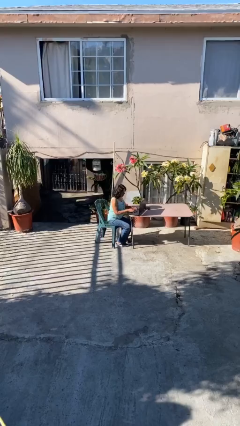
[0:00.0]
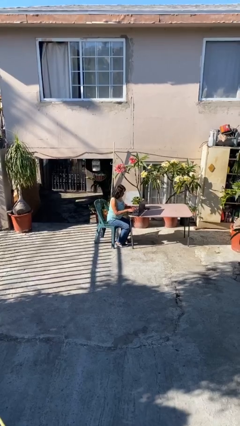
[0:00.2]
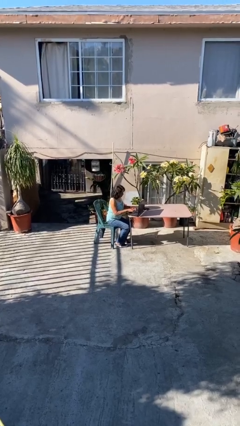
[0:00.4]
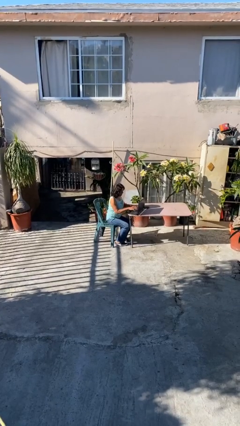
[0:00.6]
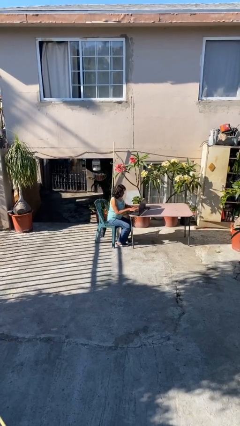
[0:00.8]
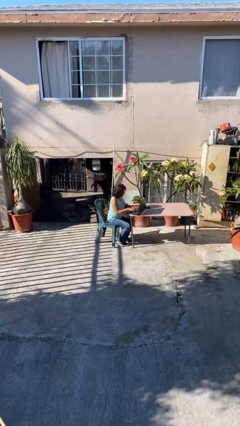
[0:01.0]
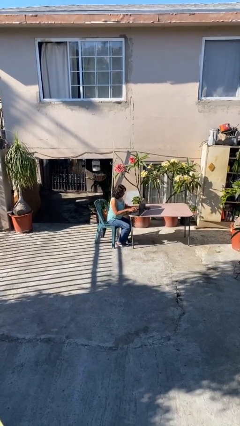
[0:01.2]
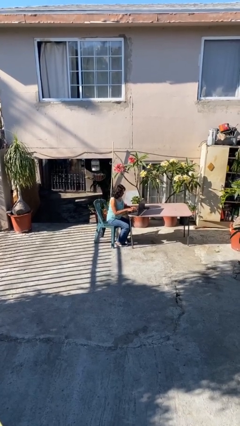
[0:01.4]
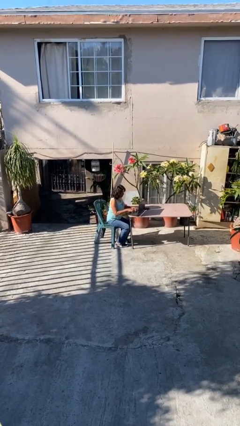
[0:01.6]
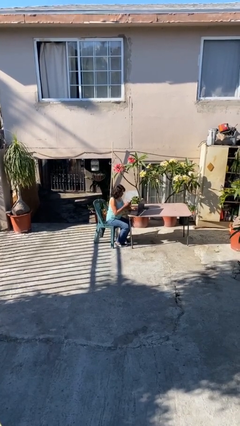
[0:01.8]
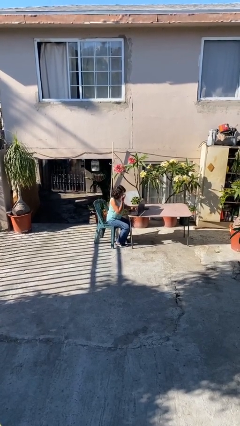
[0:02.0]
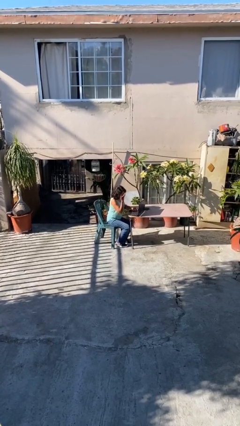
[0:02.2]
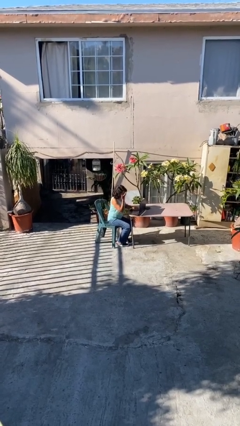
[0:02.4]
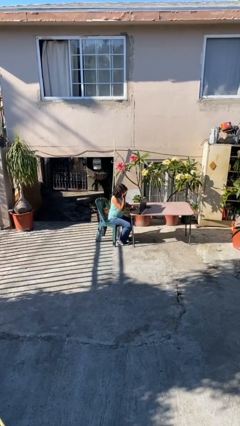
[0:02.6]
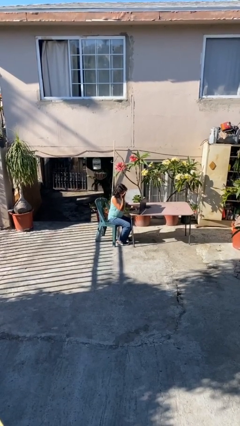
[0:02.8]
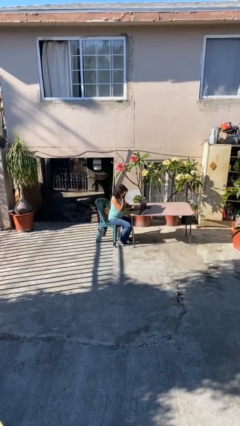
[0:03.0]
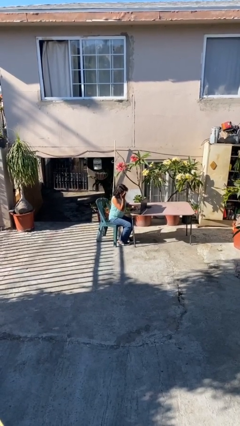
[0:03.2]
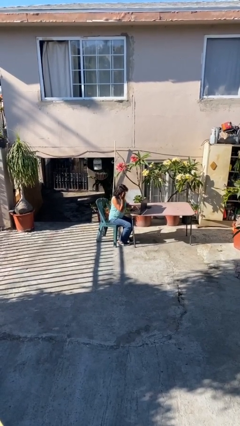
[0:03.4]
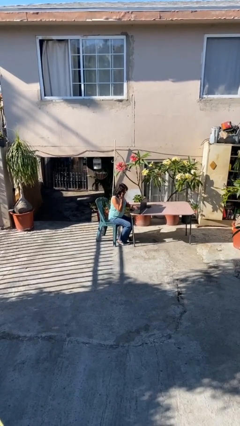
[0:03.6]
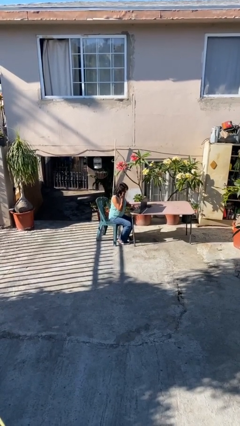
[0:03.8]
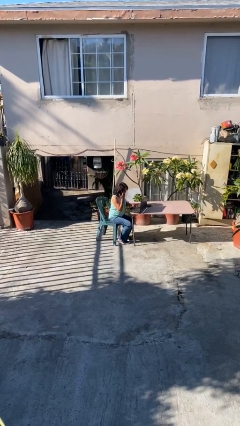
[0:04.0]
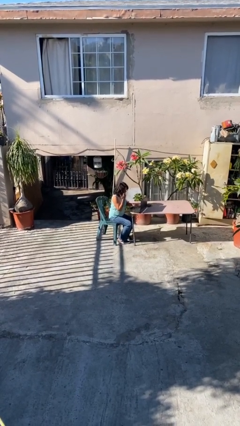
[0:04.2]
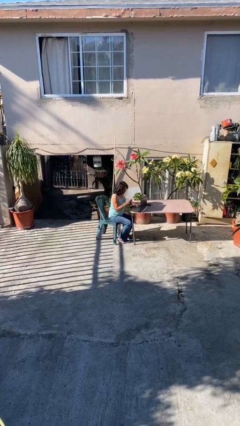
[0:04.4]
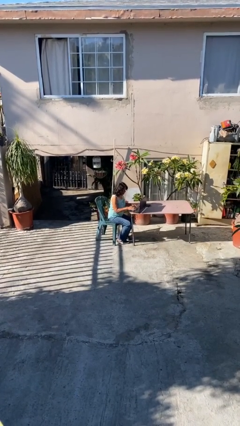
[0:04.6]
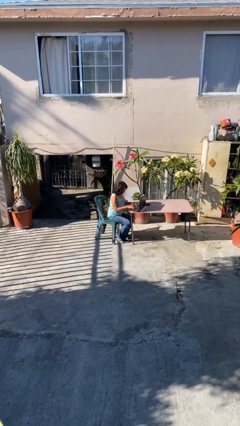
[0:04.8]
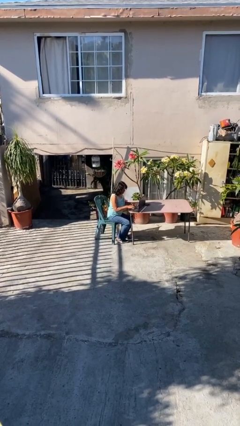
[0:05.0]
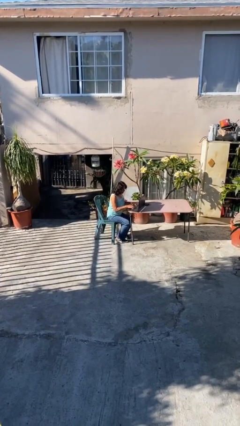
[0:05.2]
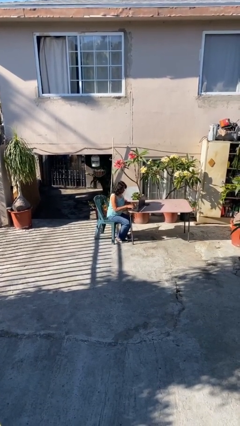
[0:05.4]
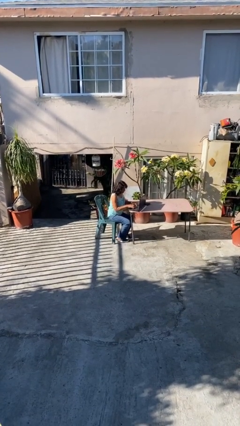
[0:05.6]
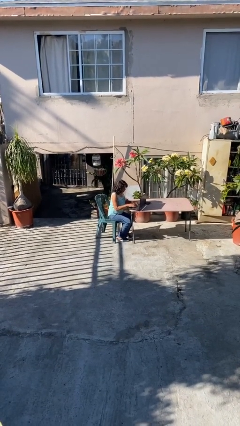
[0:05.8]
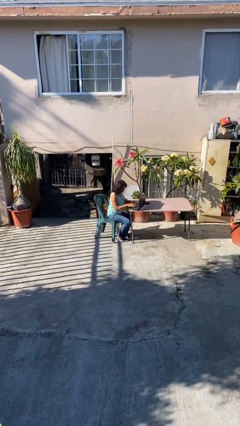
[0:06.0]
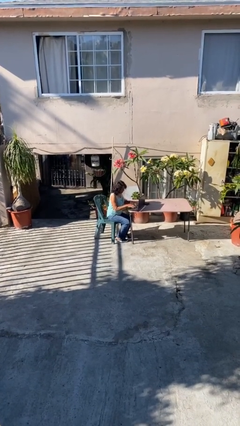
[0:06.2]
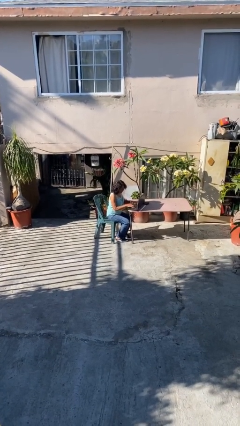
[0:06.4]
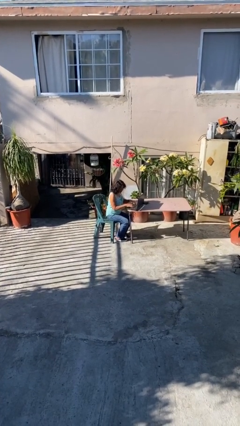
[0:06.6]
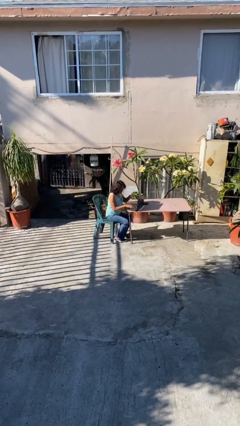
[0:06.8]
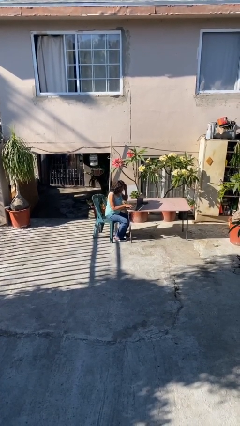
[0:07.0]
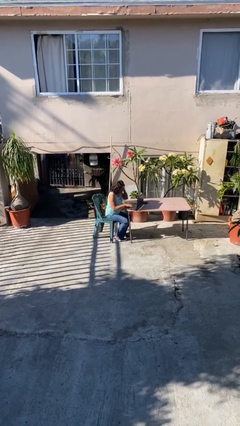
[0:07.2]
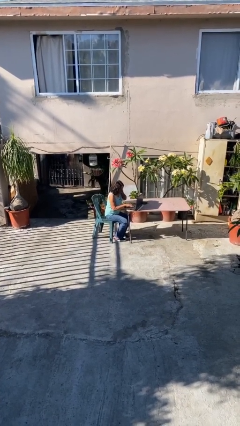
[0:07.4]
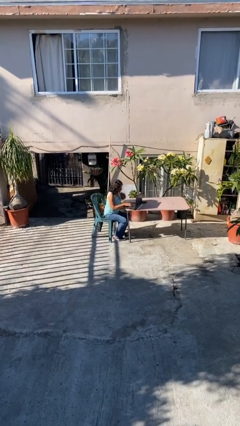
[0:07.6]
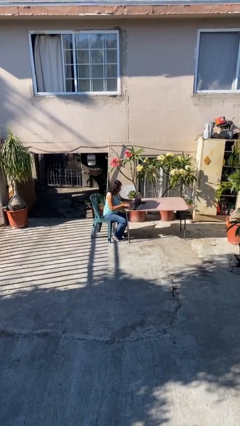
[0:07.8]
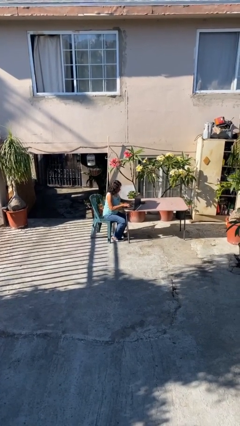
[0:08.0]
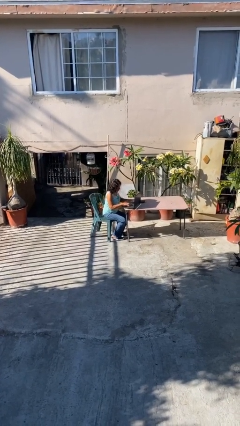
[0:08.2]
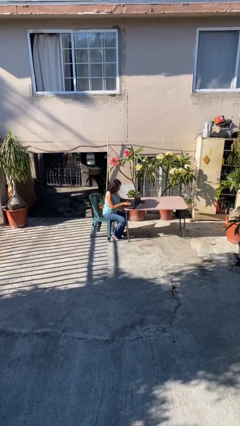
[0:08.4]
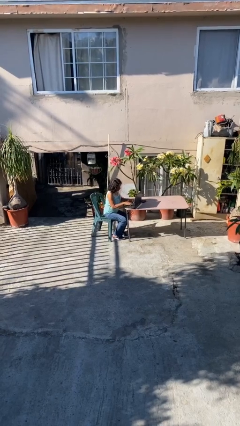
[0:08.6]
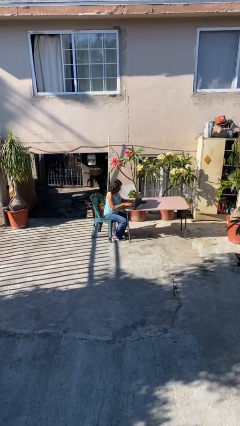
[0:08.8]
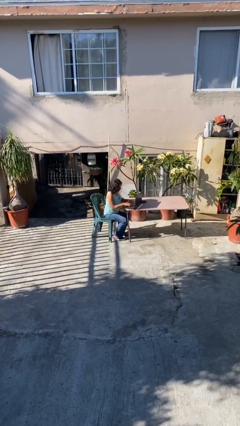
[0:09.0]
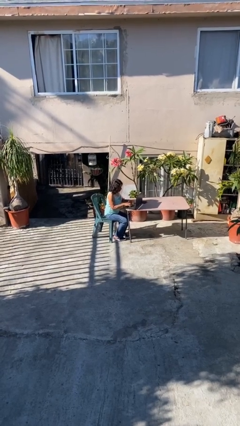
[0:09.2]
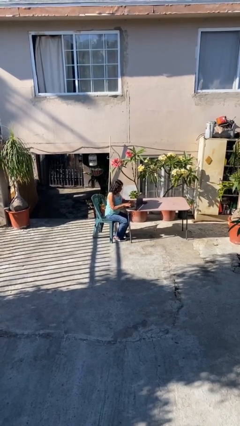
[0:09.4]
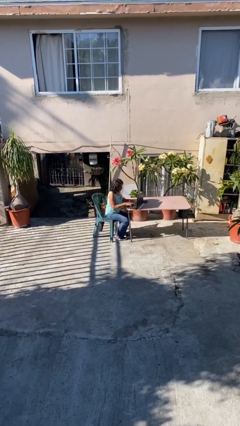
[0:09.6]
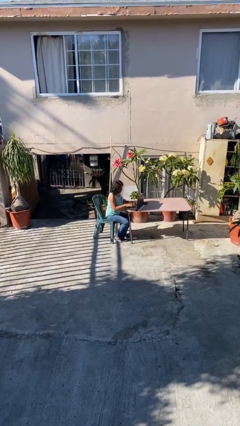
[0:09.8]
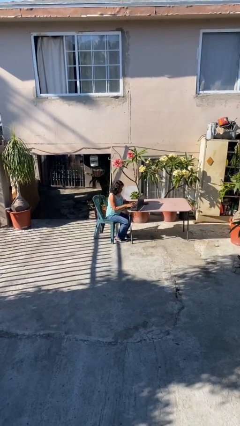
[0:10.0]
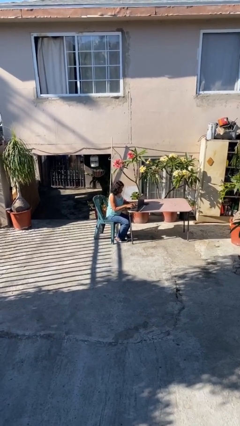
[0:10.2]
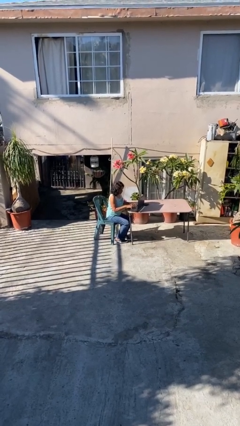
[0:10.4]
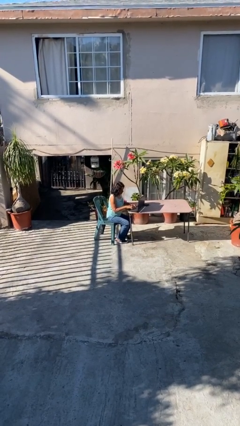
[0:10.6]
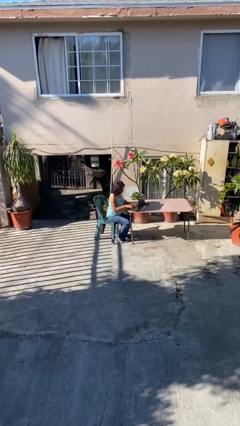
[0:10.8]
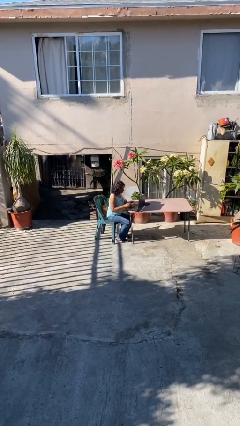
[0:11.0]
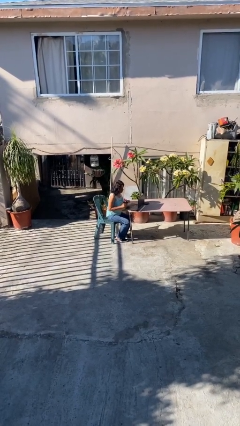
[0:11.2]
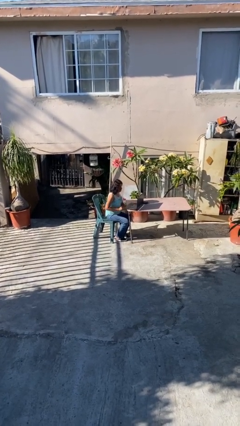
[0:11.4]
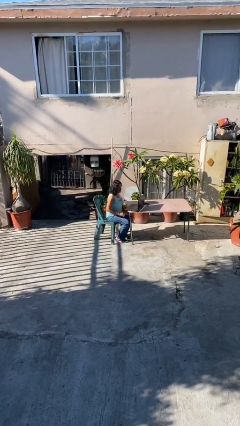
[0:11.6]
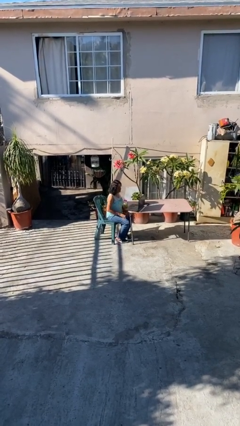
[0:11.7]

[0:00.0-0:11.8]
person interacts with laptop

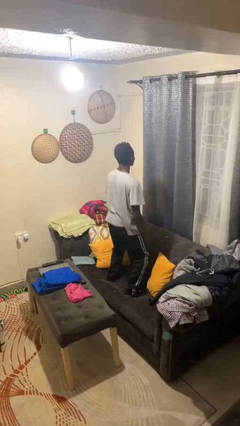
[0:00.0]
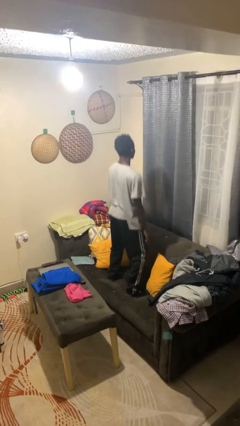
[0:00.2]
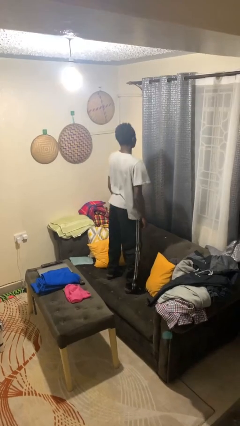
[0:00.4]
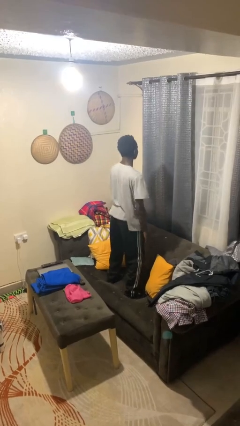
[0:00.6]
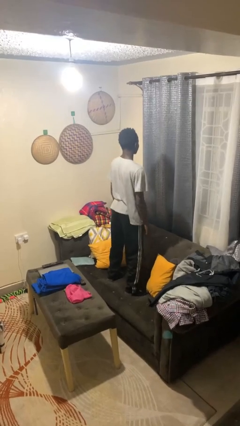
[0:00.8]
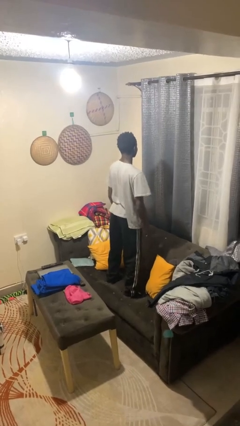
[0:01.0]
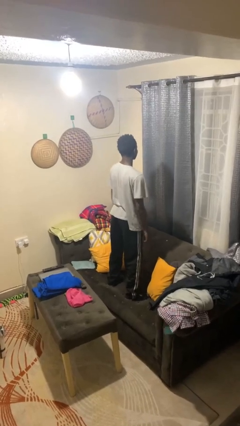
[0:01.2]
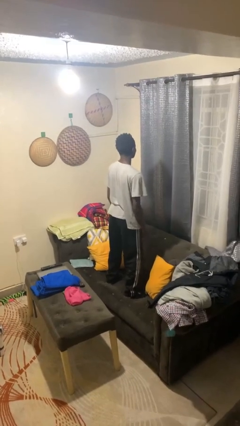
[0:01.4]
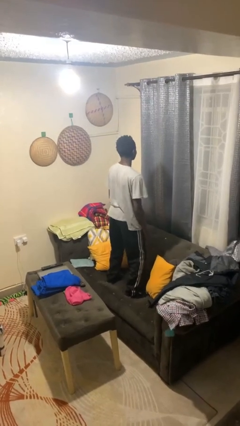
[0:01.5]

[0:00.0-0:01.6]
person jumps on couch

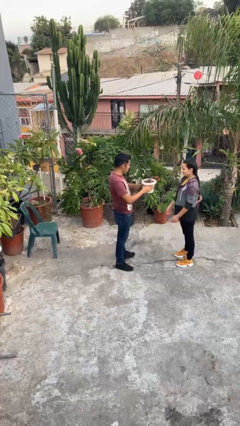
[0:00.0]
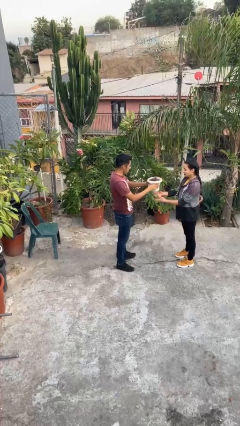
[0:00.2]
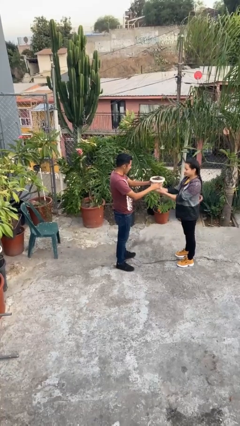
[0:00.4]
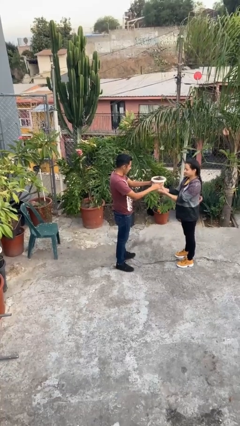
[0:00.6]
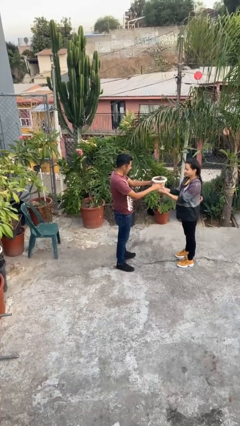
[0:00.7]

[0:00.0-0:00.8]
person transfers object to person

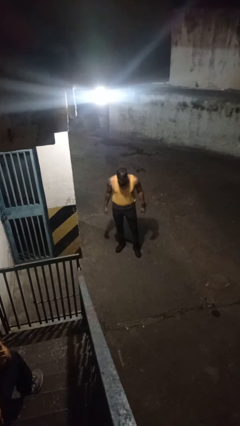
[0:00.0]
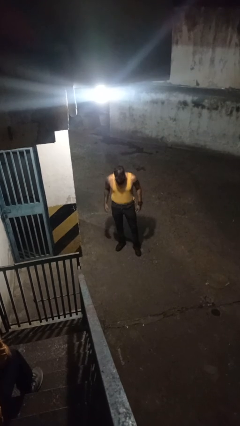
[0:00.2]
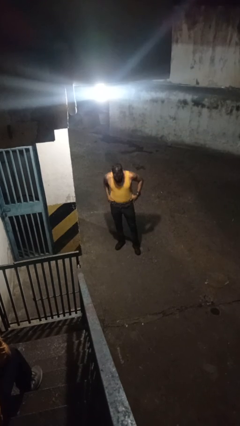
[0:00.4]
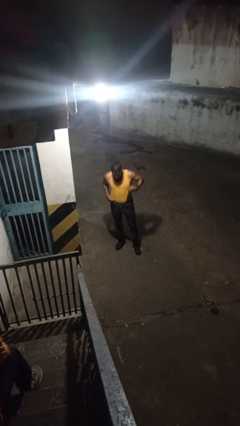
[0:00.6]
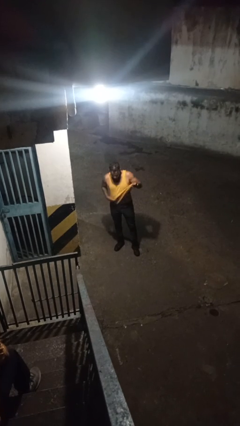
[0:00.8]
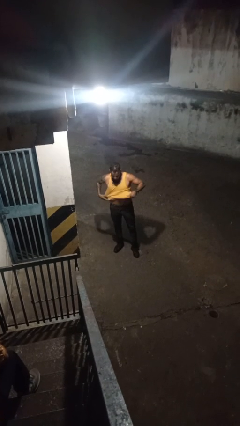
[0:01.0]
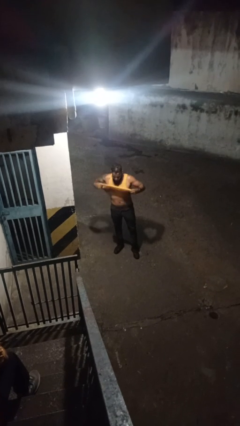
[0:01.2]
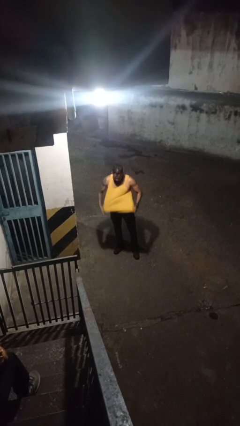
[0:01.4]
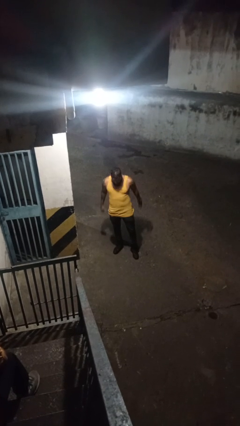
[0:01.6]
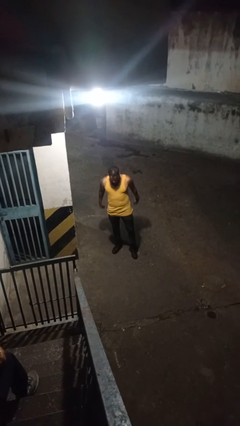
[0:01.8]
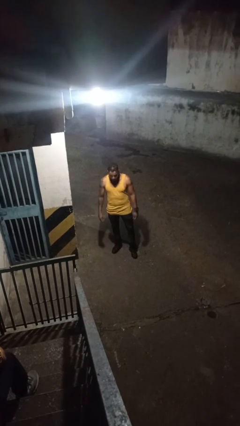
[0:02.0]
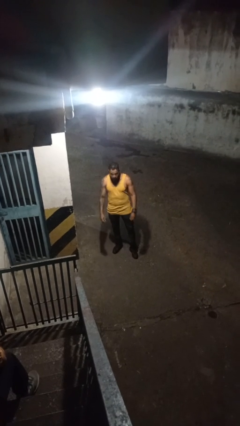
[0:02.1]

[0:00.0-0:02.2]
person untucks shirt

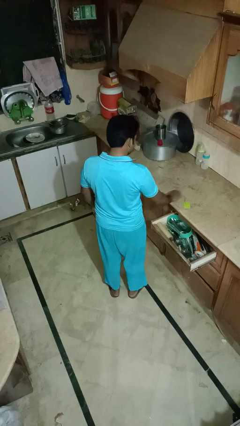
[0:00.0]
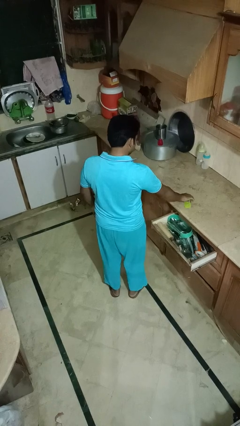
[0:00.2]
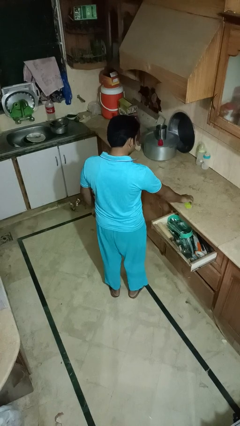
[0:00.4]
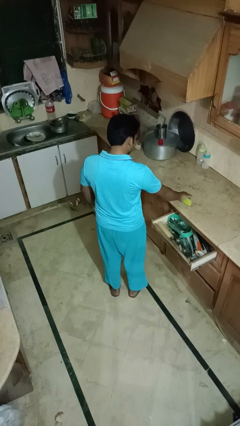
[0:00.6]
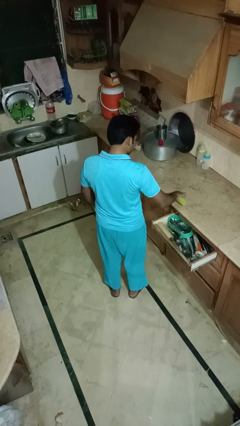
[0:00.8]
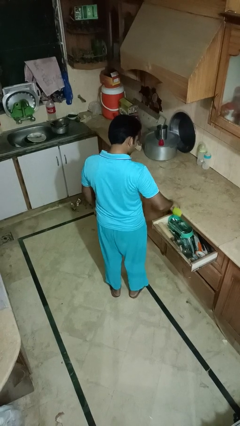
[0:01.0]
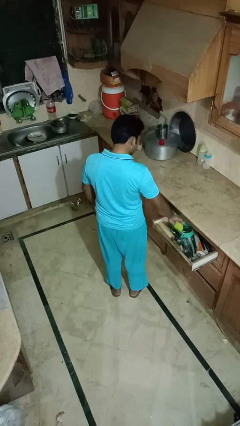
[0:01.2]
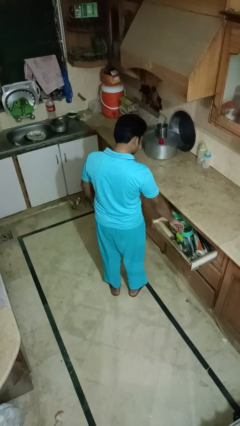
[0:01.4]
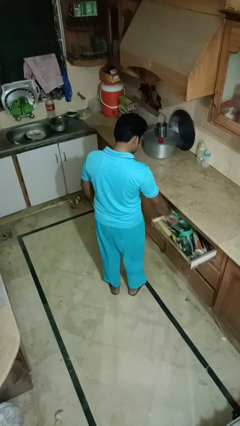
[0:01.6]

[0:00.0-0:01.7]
person puts object into kitchen drawer
